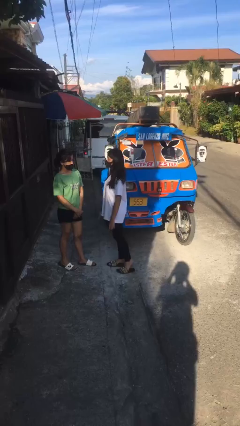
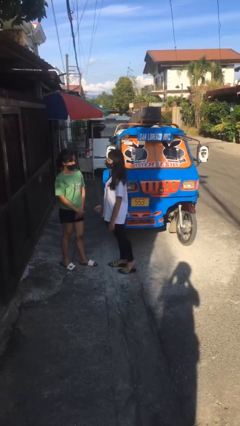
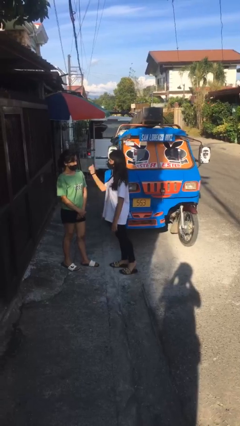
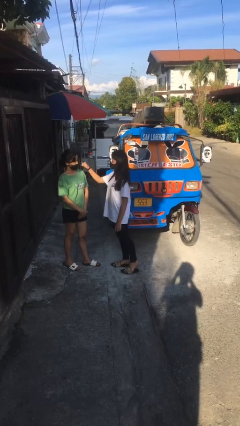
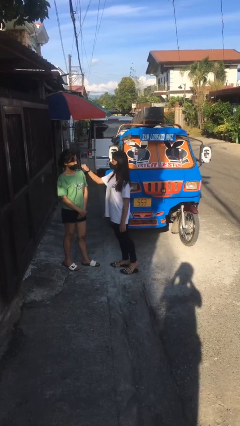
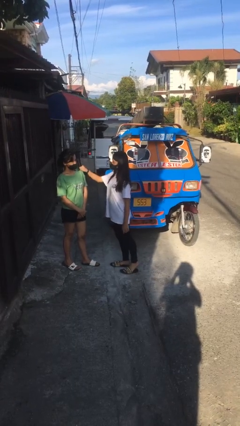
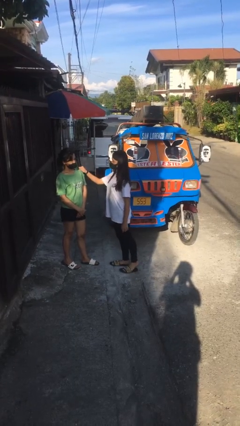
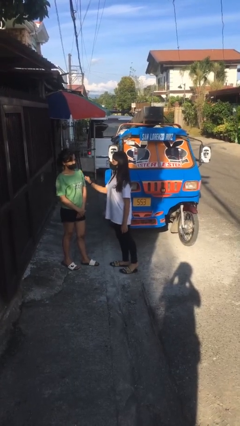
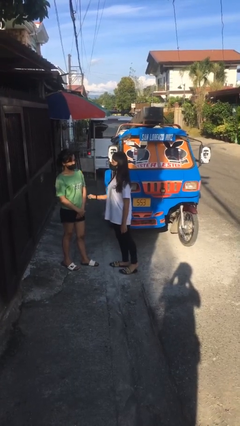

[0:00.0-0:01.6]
person pounds shoulders of person

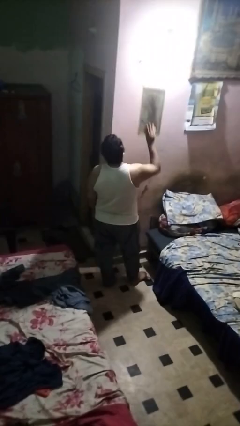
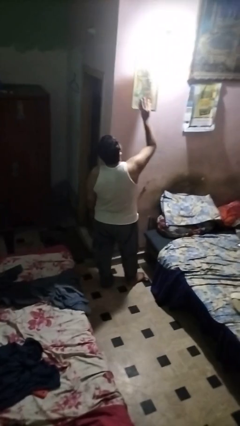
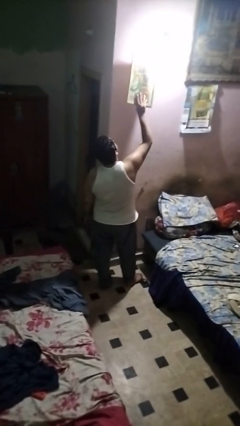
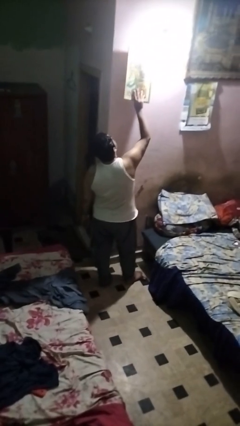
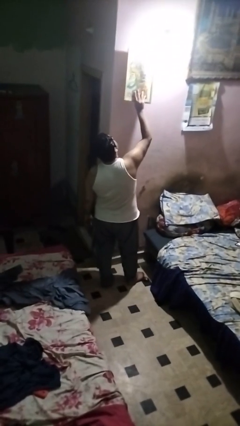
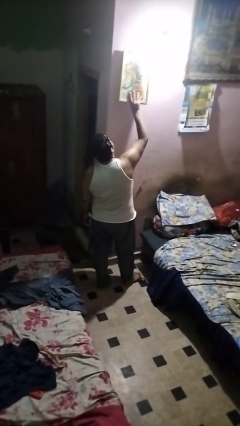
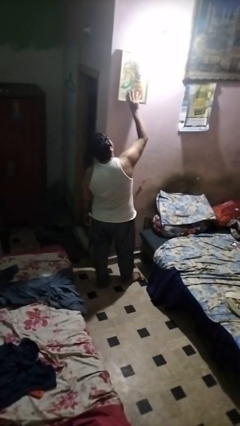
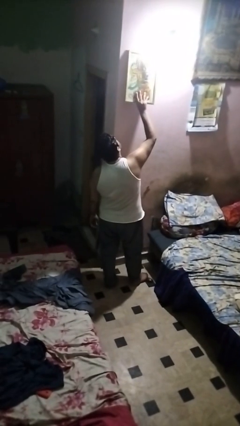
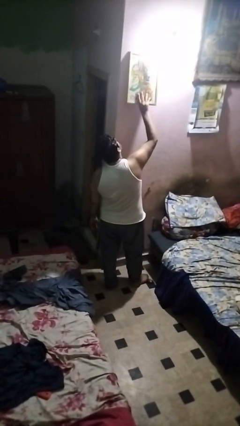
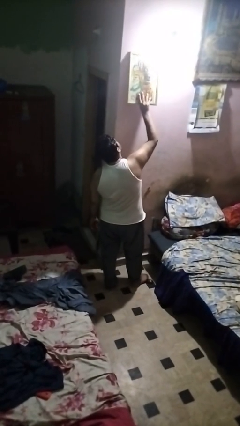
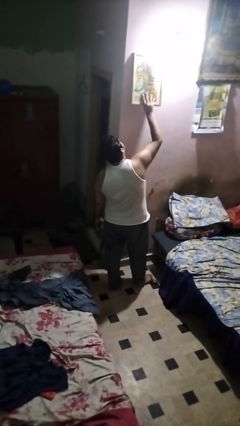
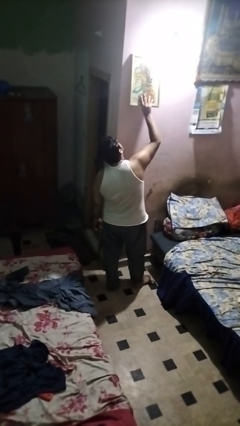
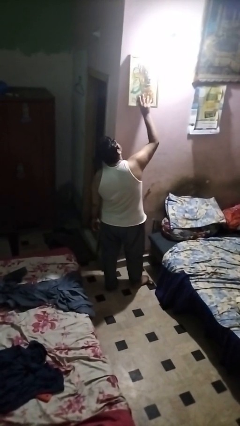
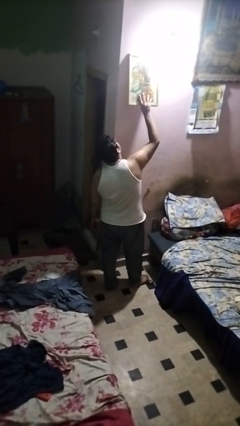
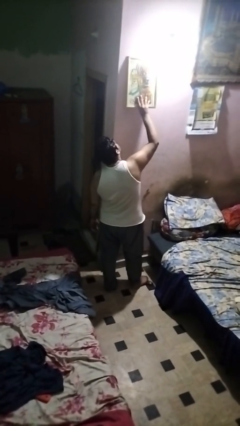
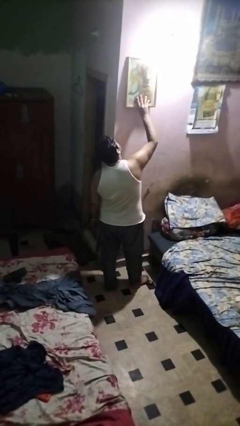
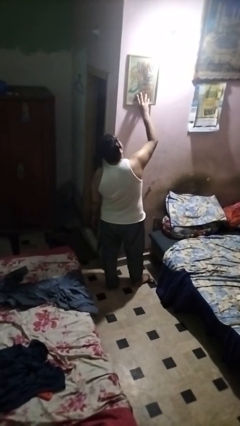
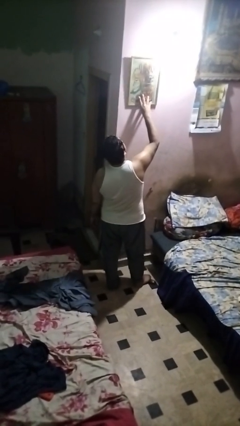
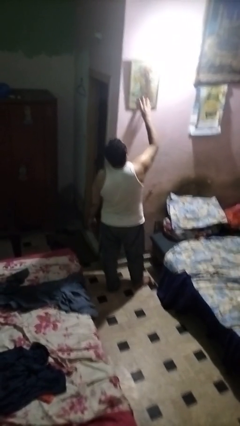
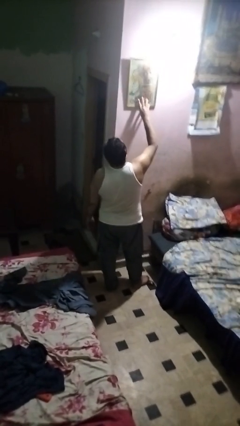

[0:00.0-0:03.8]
person puts up picture frame

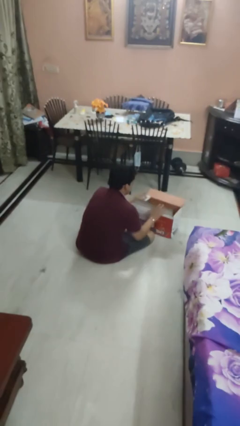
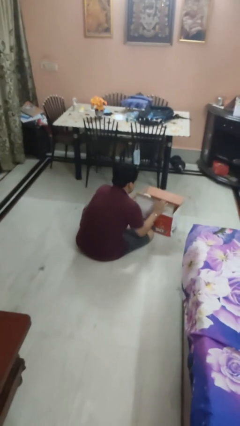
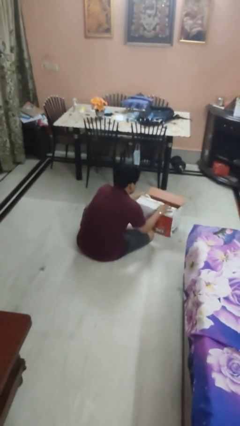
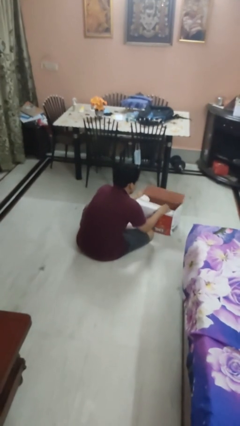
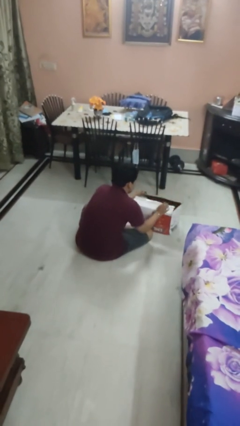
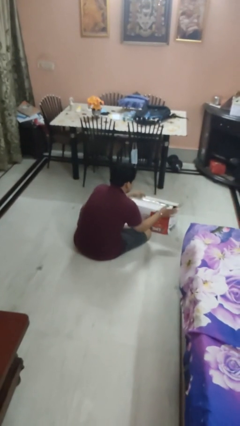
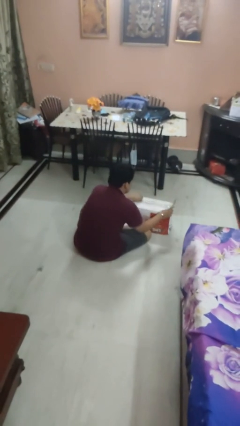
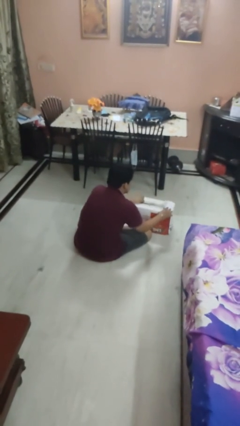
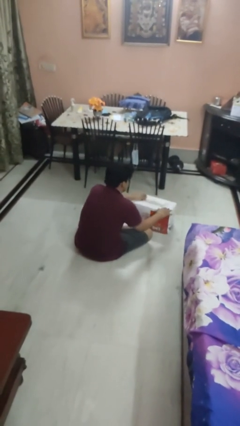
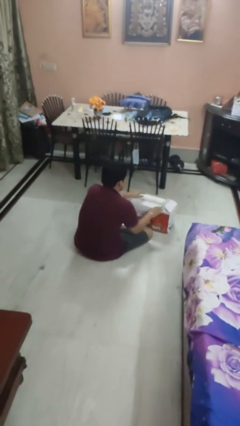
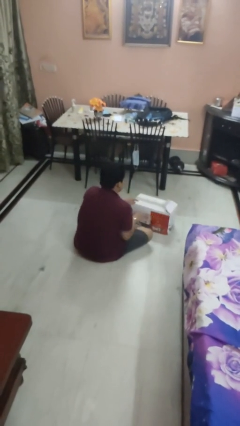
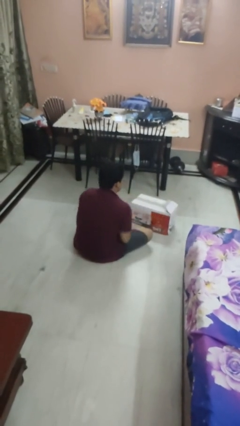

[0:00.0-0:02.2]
person closes box

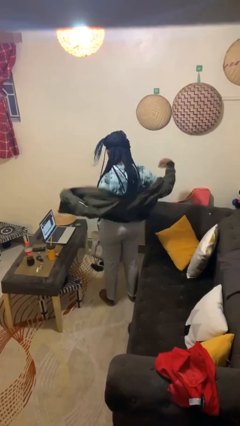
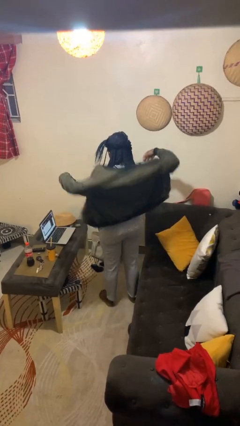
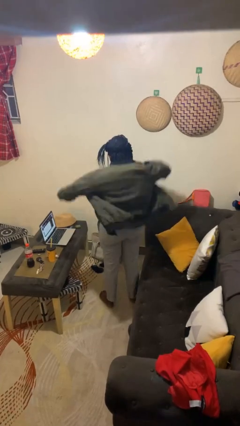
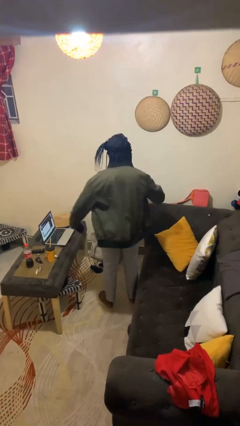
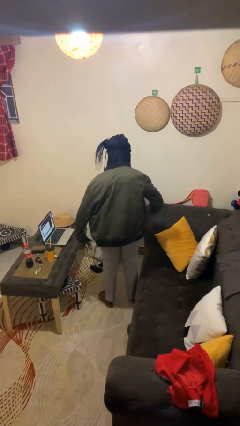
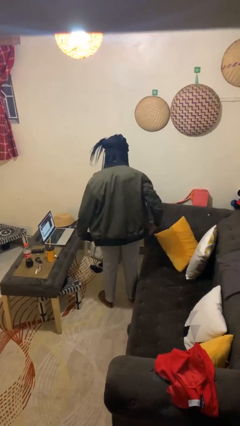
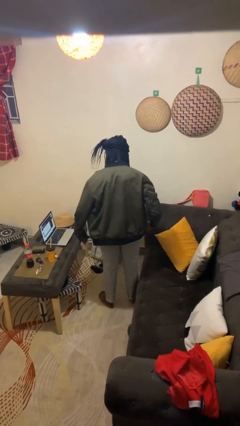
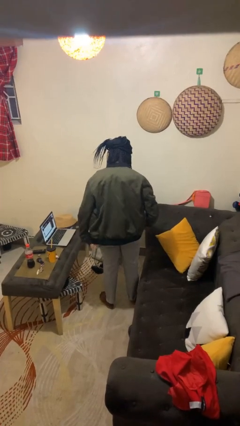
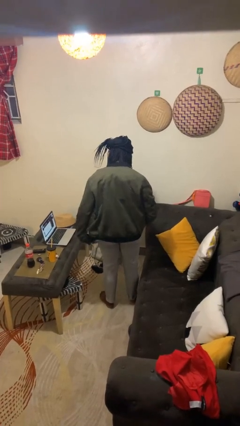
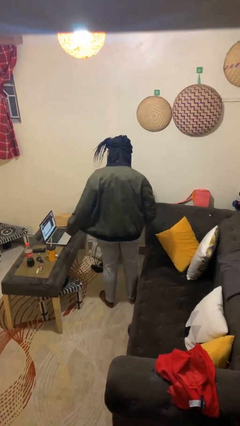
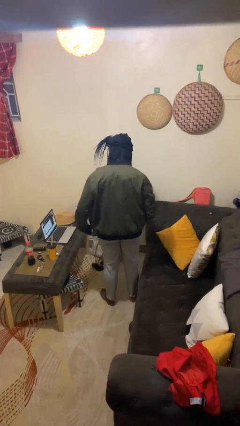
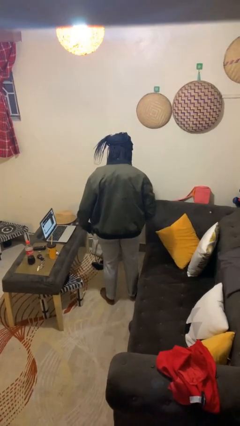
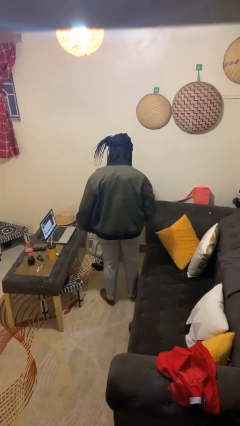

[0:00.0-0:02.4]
person puts on jacket

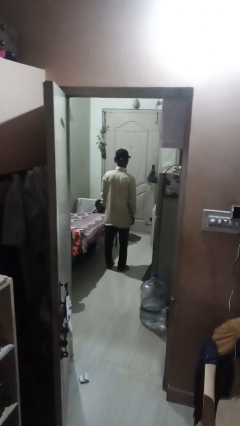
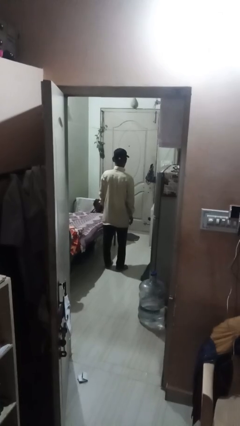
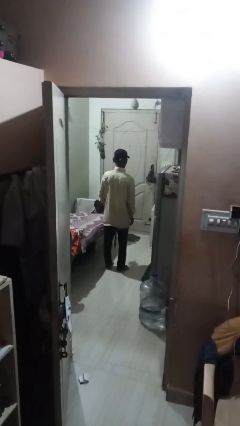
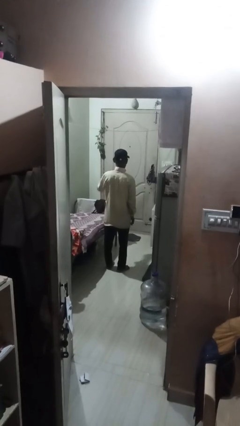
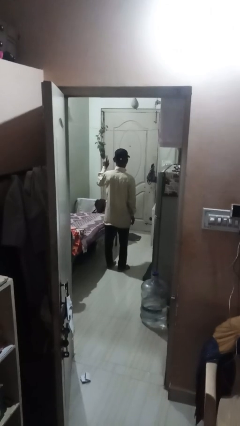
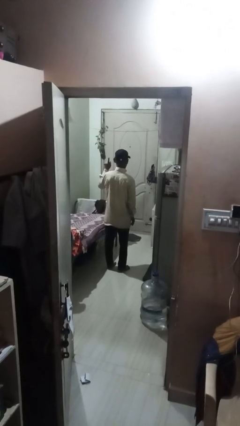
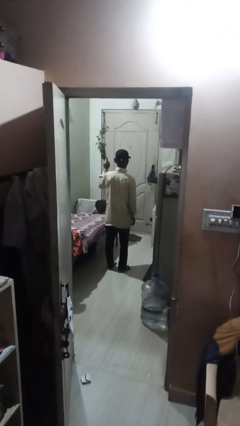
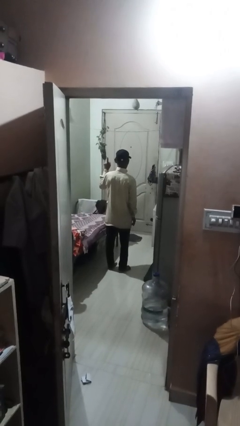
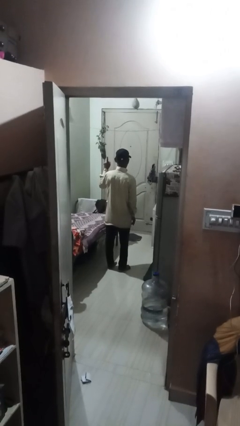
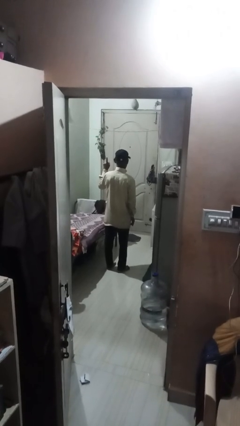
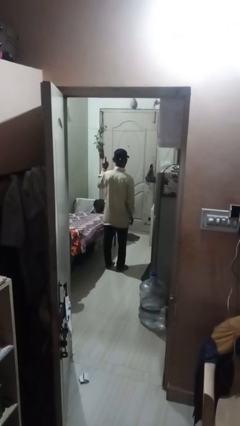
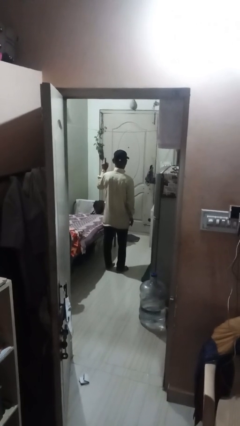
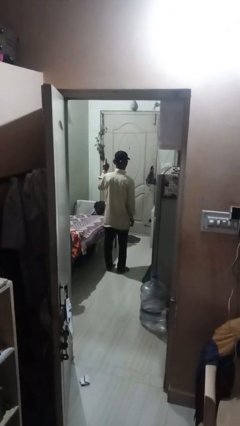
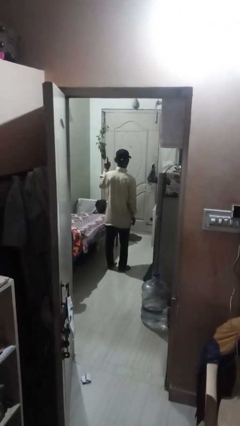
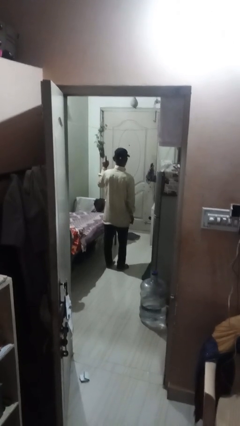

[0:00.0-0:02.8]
person gestures number one

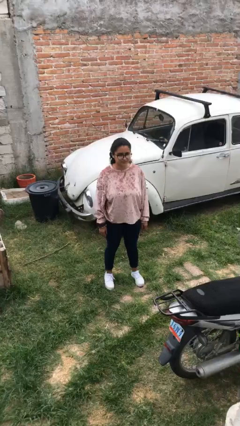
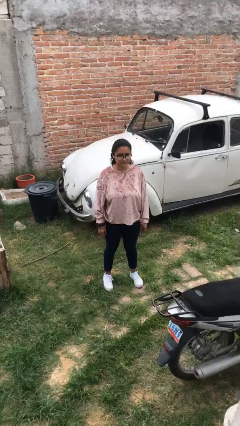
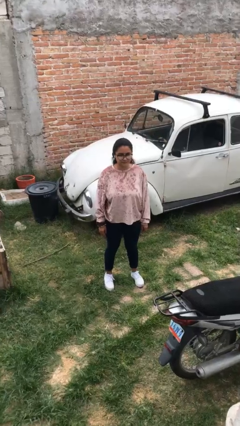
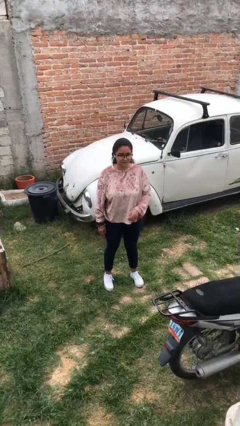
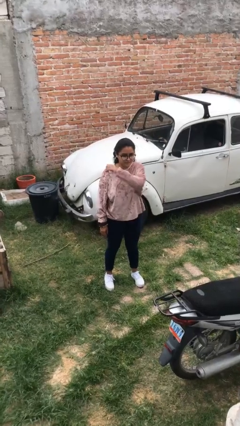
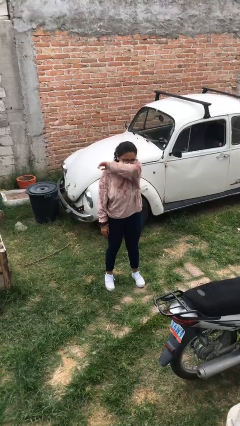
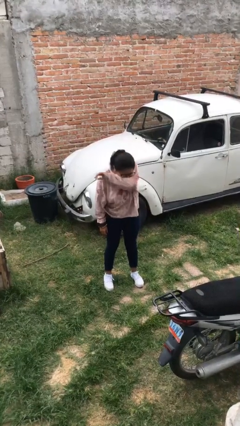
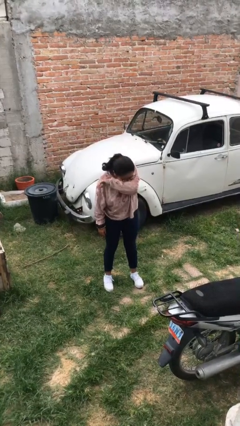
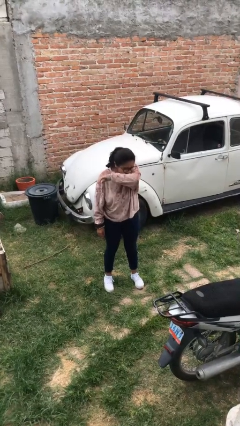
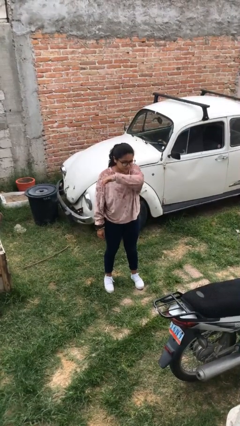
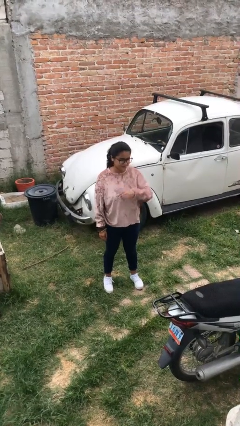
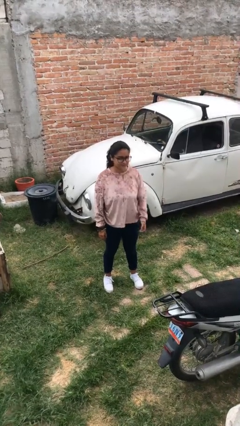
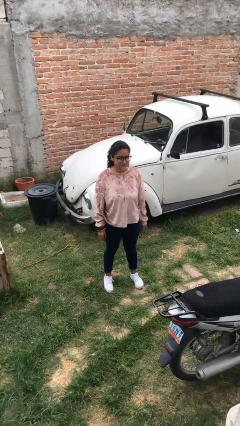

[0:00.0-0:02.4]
person sneezes into arm

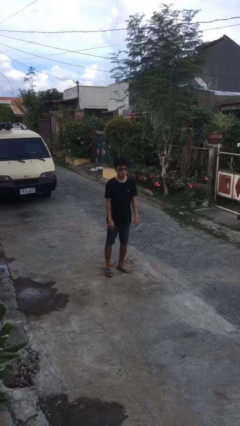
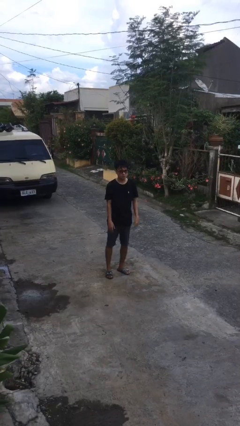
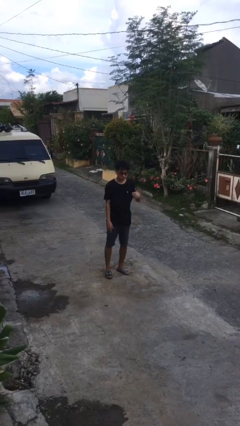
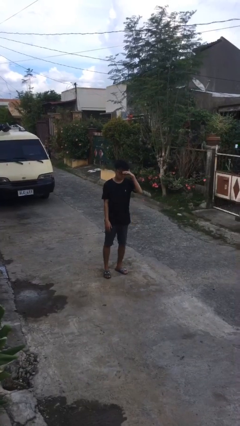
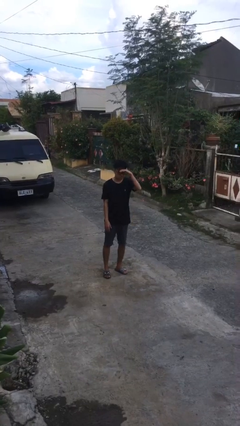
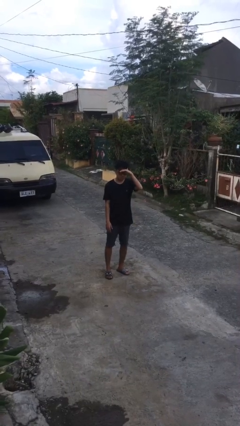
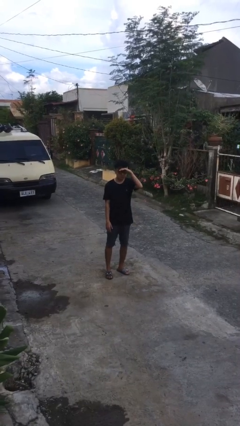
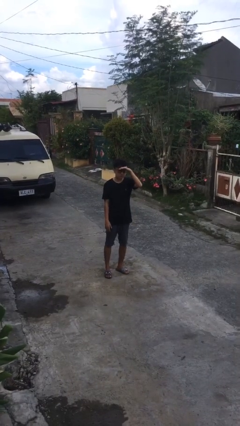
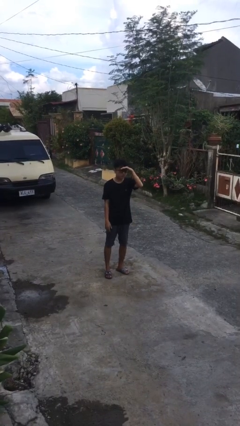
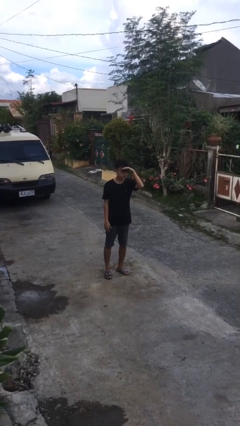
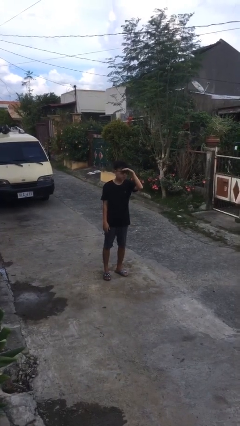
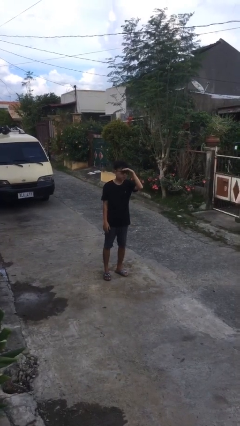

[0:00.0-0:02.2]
person shades eyes
